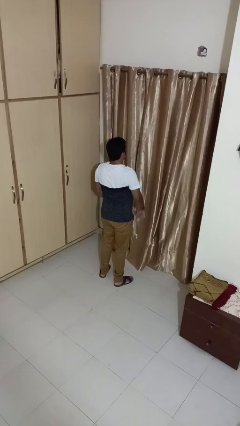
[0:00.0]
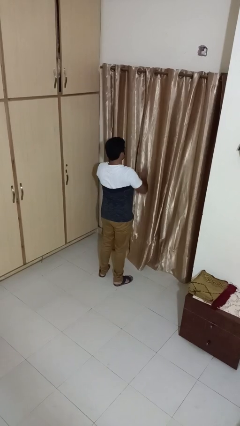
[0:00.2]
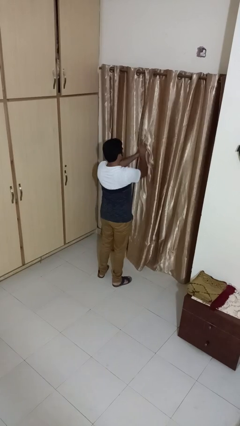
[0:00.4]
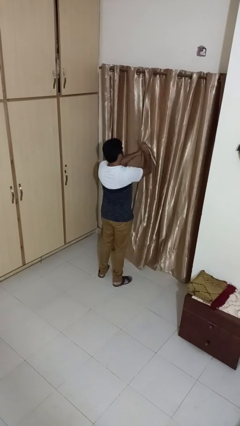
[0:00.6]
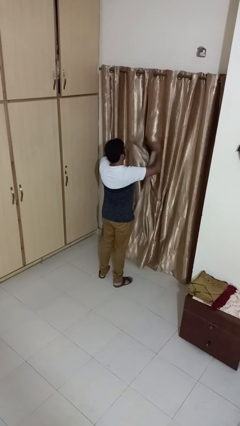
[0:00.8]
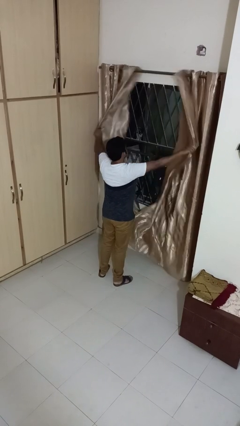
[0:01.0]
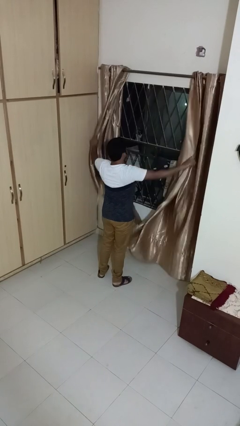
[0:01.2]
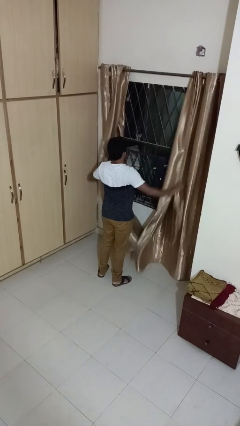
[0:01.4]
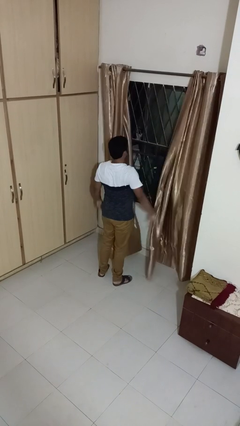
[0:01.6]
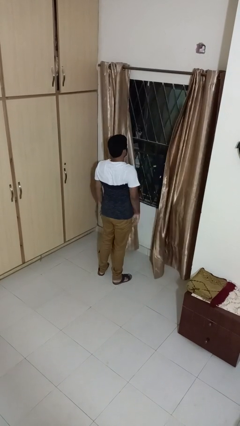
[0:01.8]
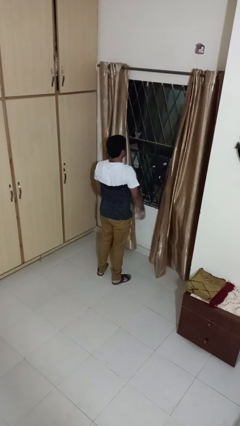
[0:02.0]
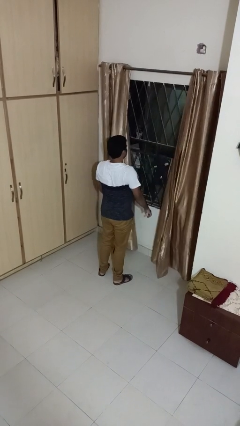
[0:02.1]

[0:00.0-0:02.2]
person opens curtains

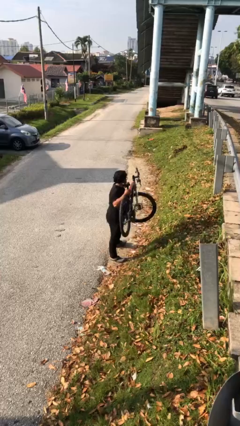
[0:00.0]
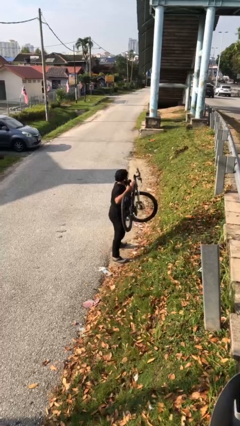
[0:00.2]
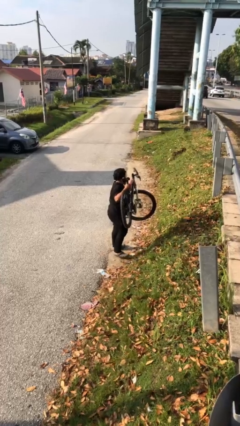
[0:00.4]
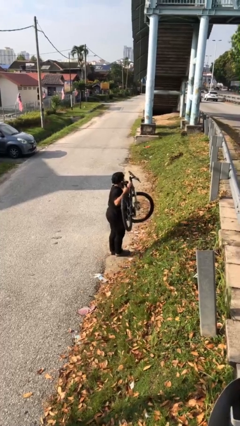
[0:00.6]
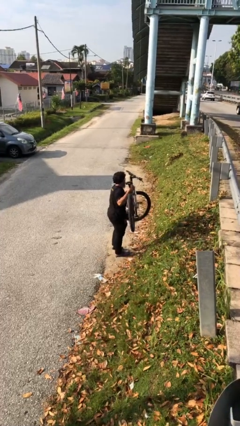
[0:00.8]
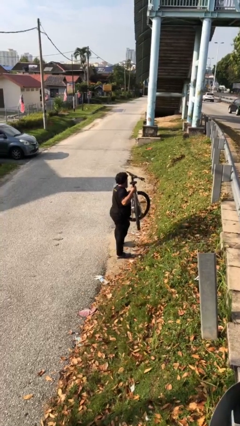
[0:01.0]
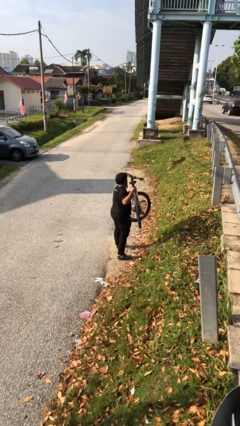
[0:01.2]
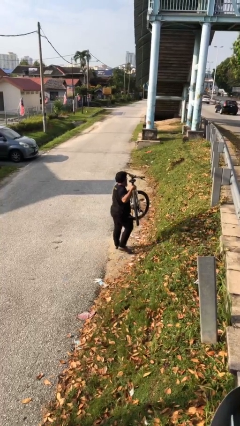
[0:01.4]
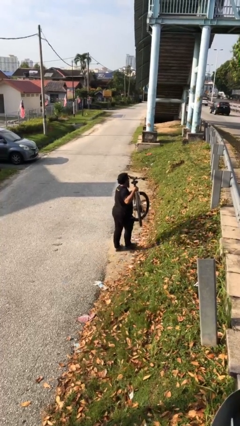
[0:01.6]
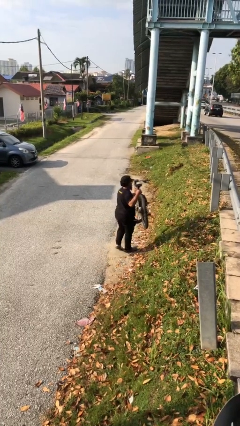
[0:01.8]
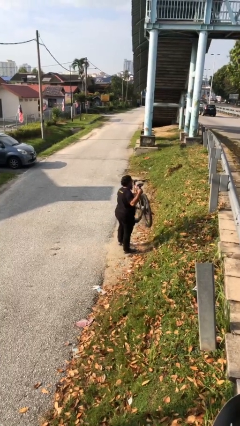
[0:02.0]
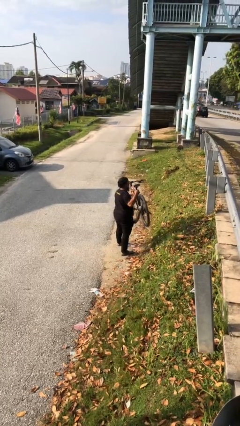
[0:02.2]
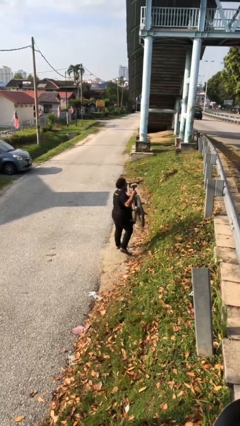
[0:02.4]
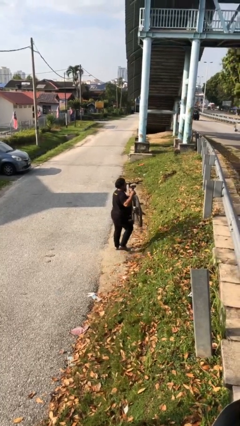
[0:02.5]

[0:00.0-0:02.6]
person carries heavy object

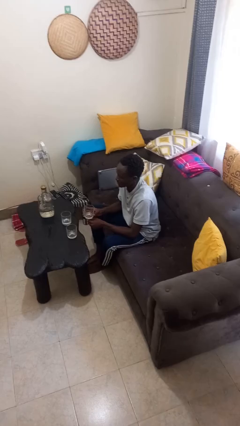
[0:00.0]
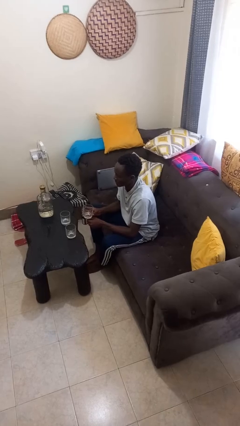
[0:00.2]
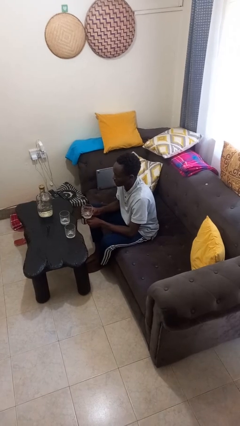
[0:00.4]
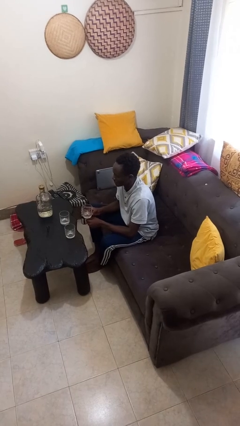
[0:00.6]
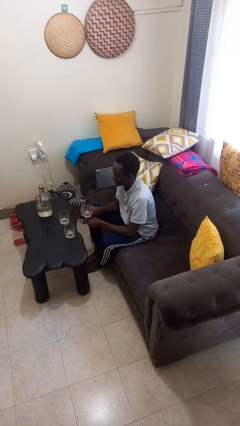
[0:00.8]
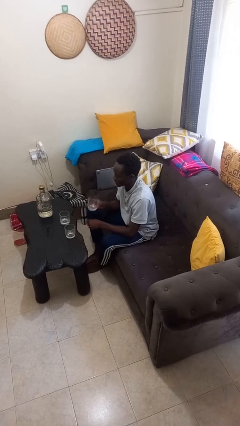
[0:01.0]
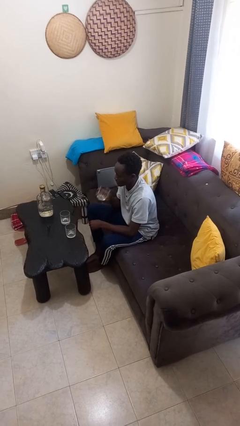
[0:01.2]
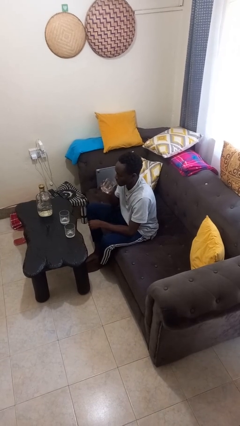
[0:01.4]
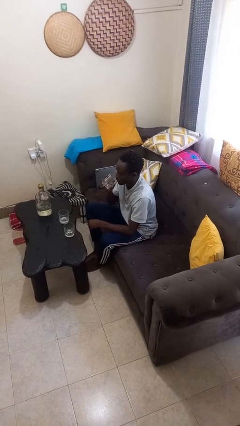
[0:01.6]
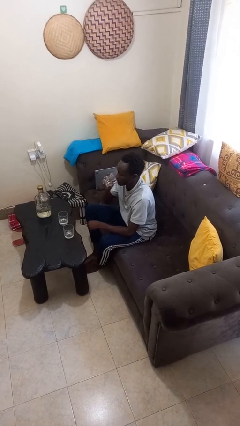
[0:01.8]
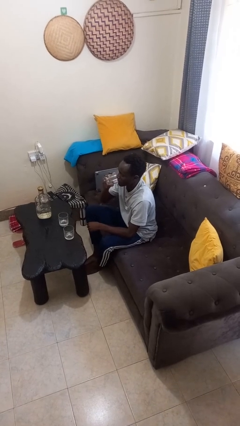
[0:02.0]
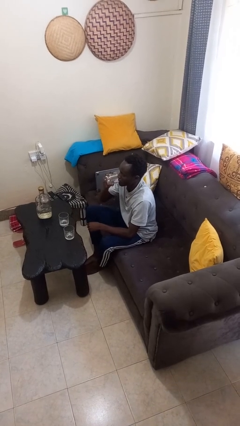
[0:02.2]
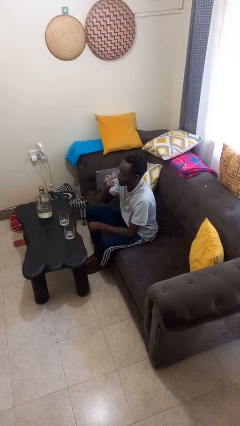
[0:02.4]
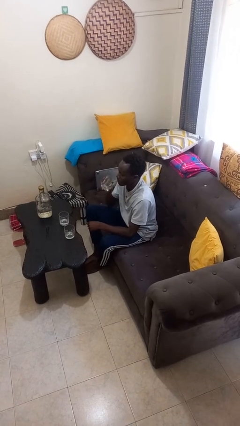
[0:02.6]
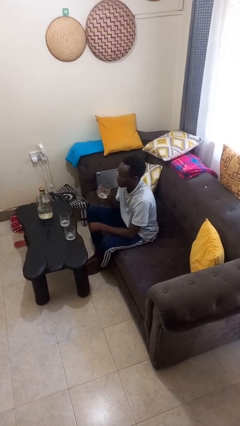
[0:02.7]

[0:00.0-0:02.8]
person drinks from shotglass

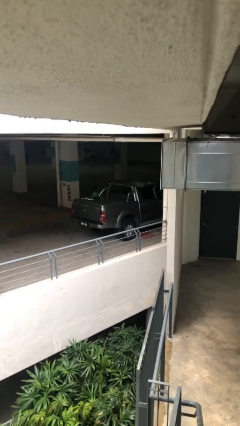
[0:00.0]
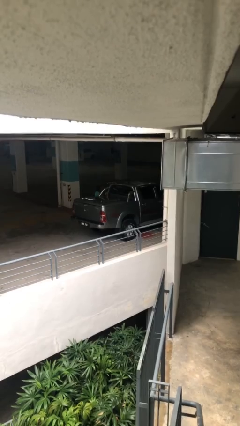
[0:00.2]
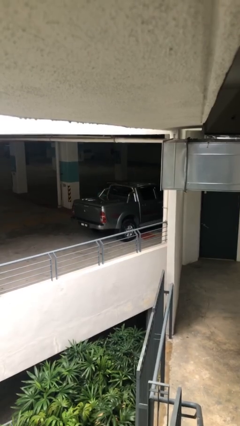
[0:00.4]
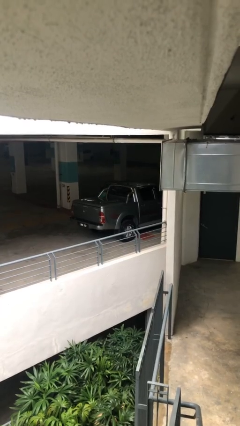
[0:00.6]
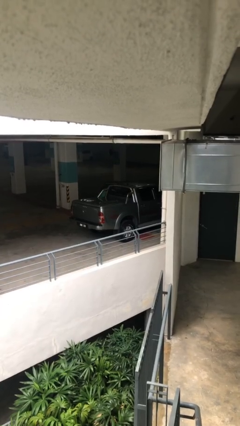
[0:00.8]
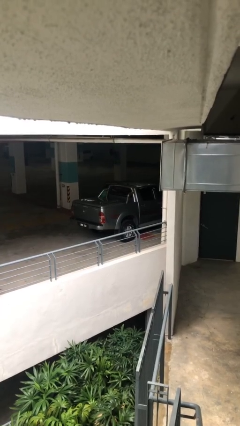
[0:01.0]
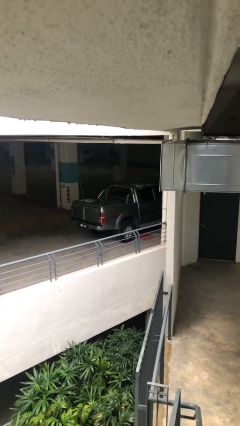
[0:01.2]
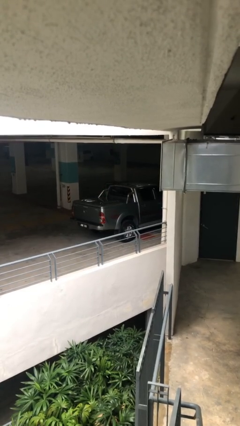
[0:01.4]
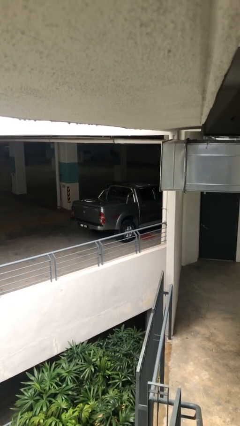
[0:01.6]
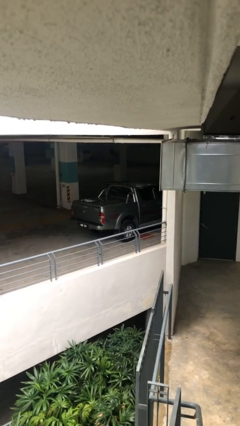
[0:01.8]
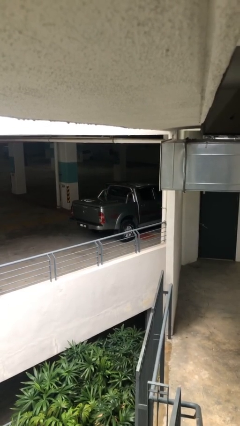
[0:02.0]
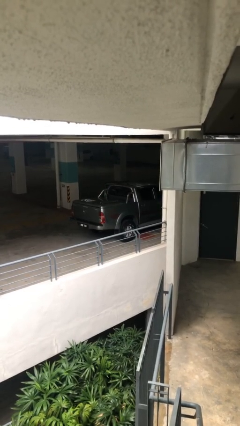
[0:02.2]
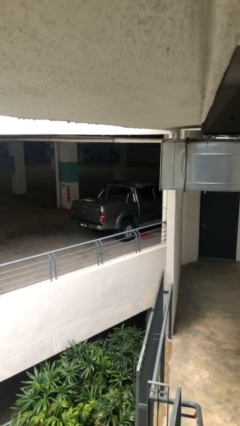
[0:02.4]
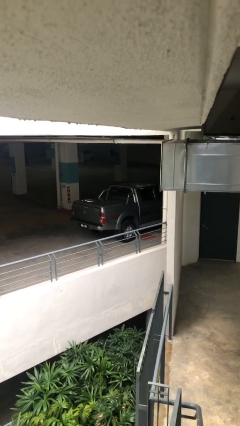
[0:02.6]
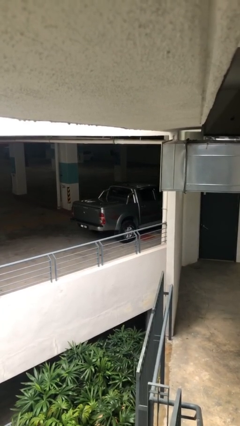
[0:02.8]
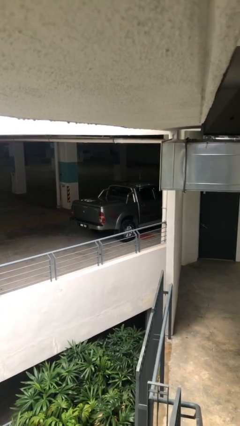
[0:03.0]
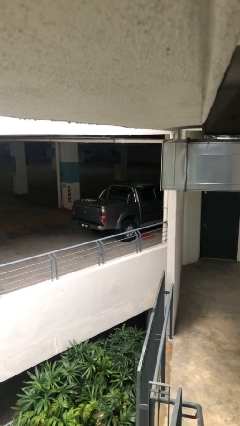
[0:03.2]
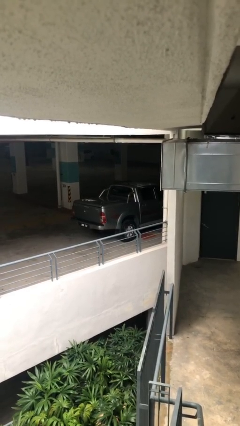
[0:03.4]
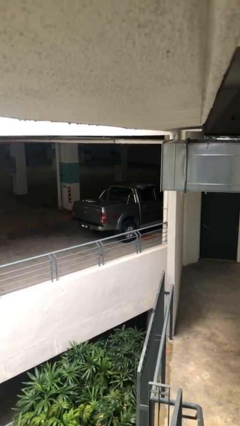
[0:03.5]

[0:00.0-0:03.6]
car picks up person

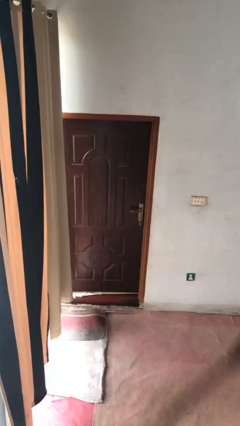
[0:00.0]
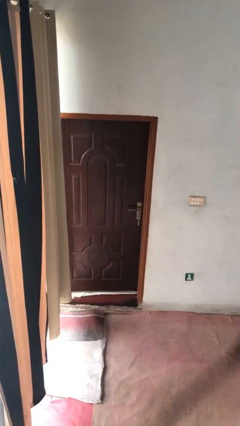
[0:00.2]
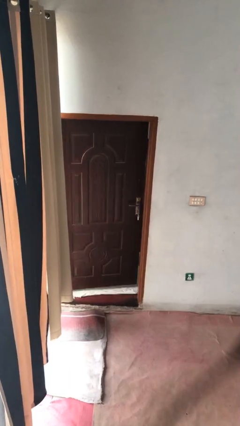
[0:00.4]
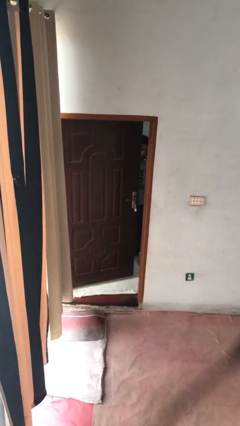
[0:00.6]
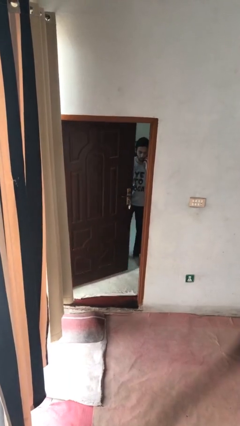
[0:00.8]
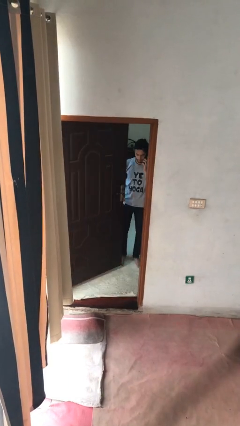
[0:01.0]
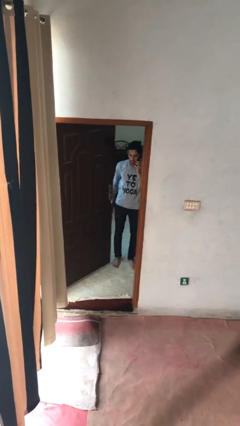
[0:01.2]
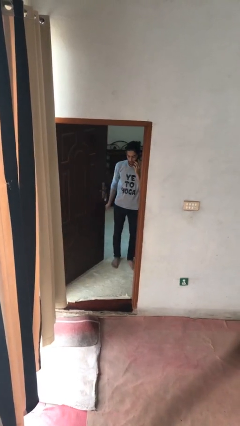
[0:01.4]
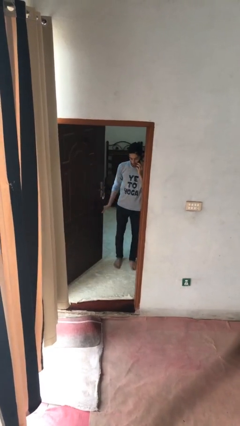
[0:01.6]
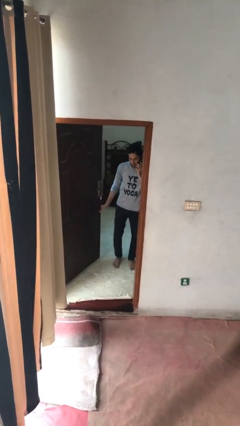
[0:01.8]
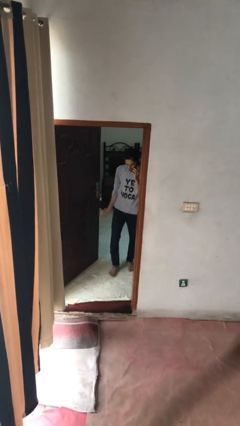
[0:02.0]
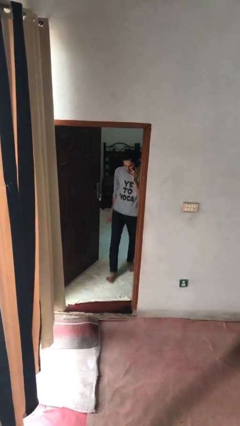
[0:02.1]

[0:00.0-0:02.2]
person opens facility door

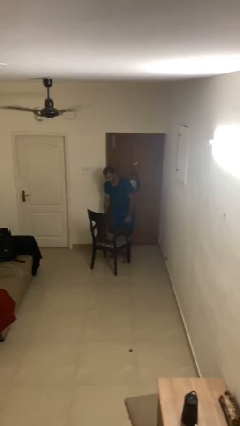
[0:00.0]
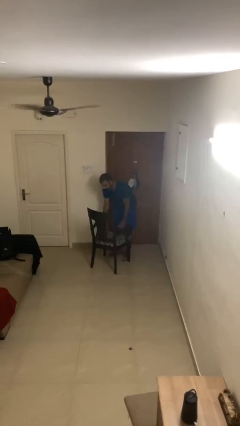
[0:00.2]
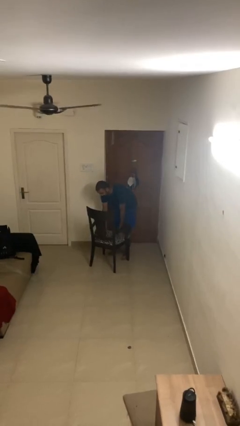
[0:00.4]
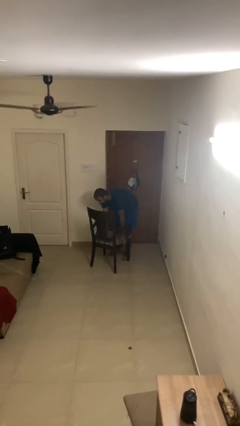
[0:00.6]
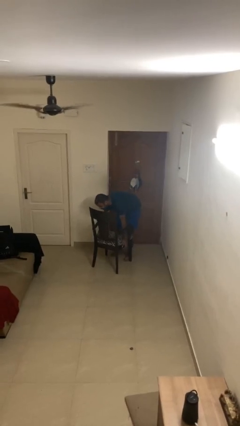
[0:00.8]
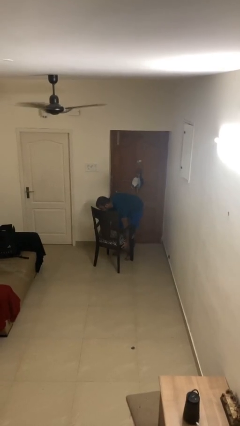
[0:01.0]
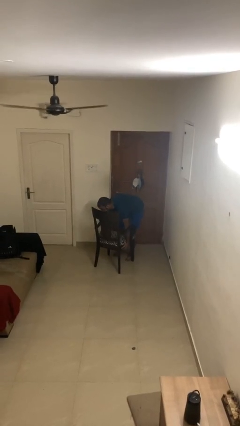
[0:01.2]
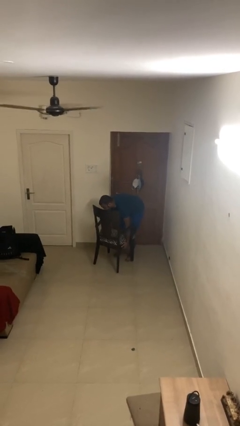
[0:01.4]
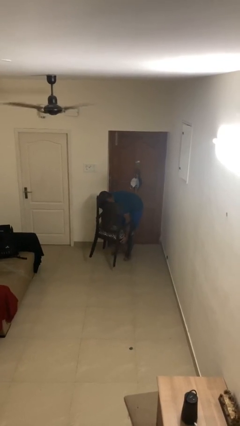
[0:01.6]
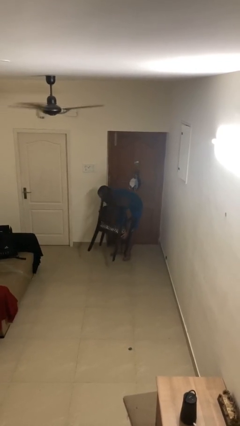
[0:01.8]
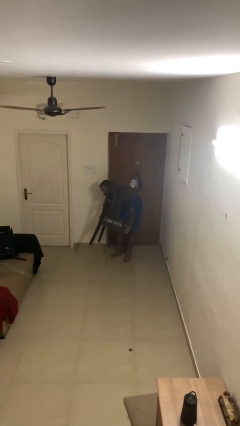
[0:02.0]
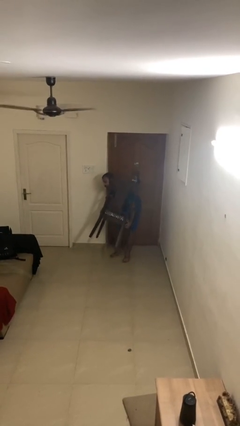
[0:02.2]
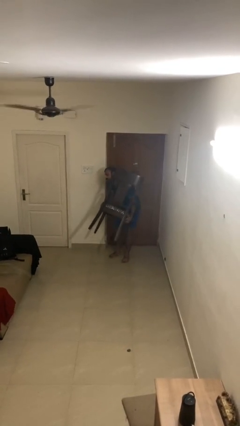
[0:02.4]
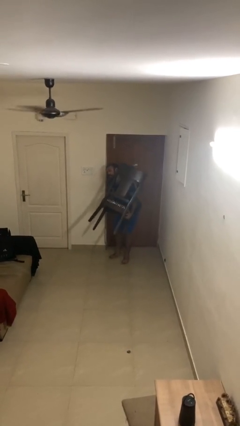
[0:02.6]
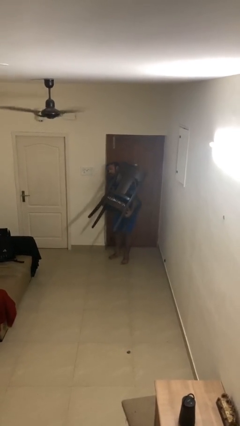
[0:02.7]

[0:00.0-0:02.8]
person picks up object from floor

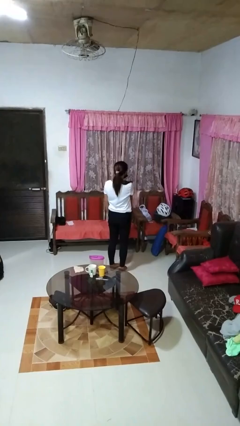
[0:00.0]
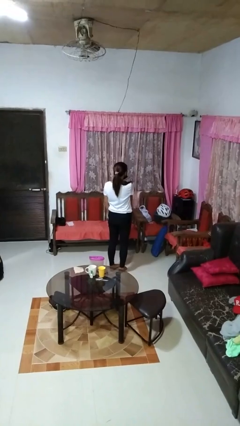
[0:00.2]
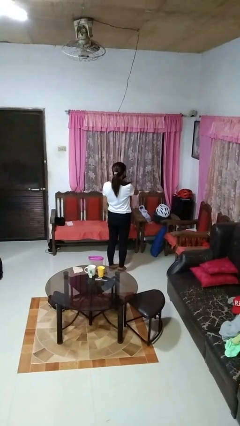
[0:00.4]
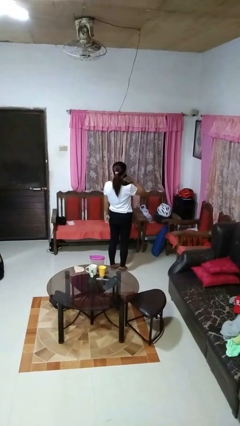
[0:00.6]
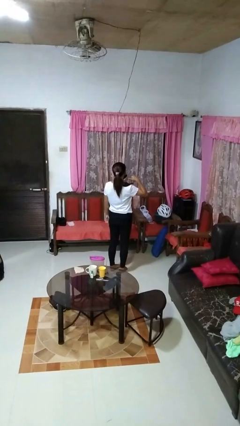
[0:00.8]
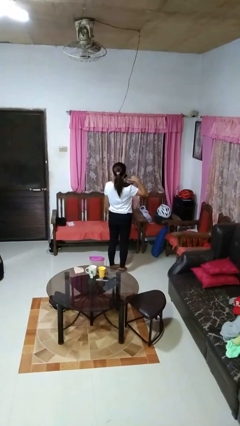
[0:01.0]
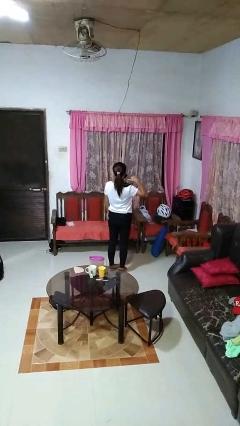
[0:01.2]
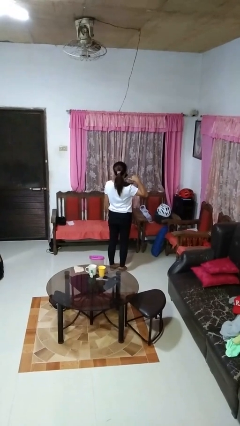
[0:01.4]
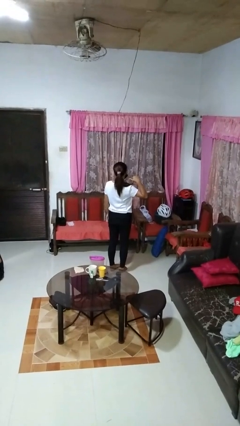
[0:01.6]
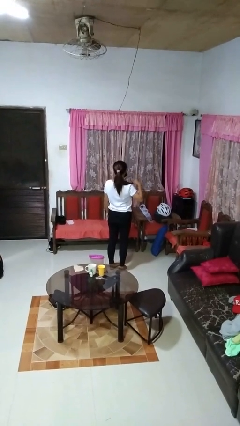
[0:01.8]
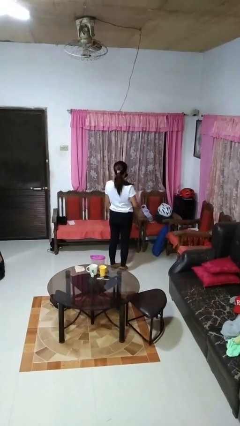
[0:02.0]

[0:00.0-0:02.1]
person gestures cut
